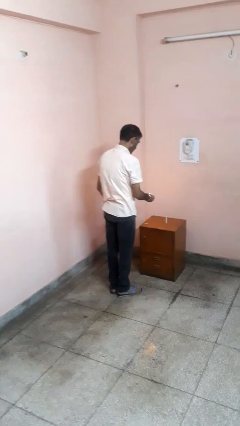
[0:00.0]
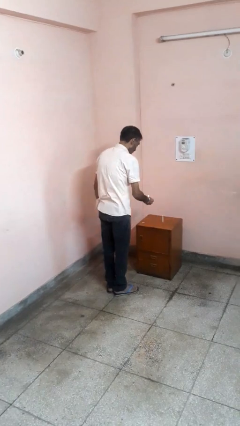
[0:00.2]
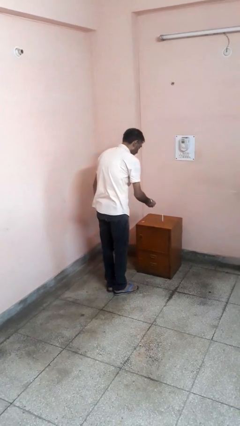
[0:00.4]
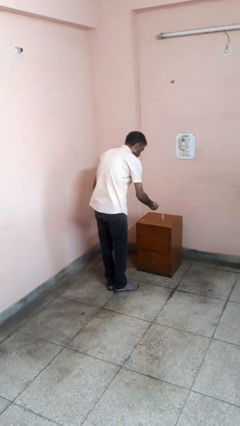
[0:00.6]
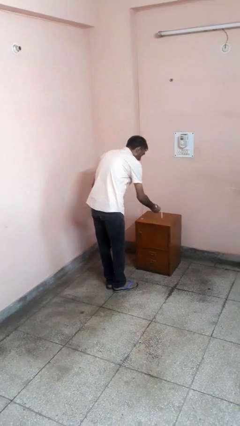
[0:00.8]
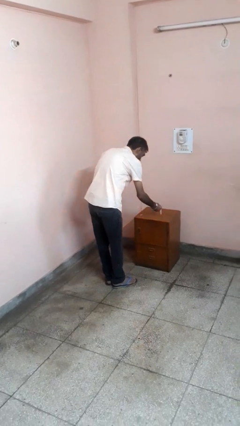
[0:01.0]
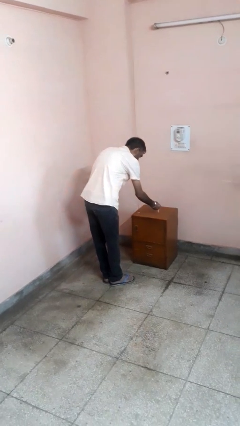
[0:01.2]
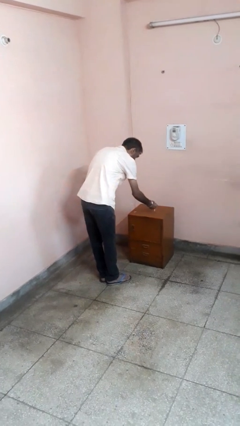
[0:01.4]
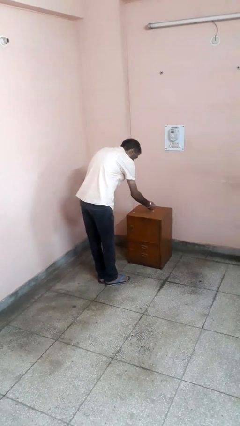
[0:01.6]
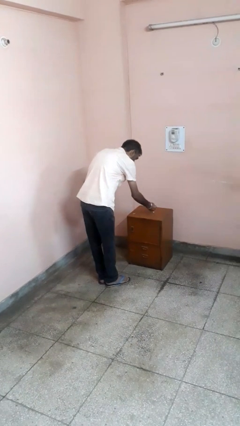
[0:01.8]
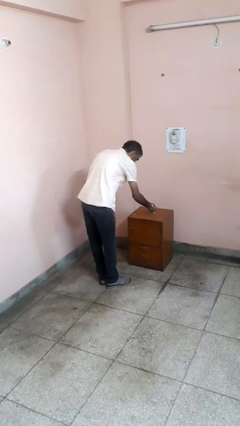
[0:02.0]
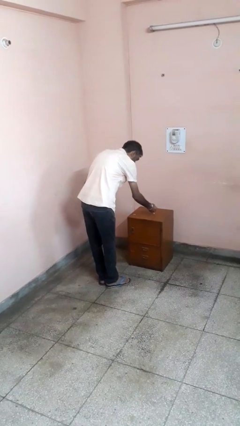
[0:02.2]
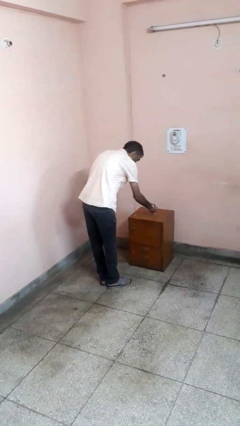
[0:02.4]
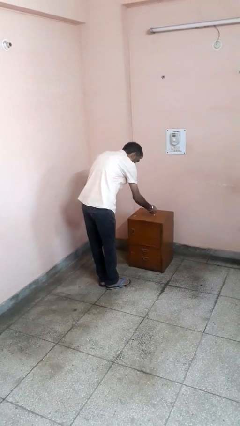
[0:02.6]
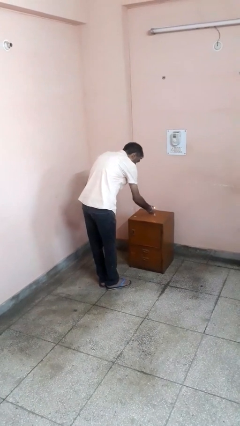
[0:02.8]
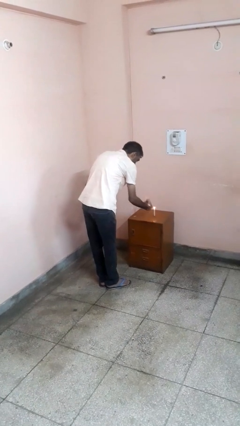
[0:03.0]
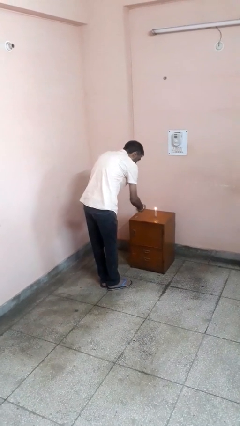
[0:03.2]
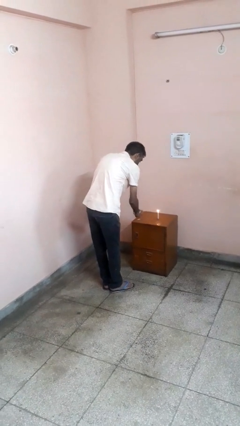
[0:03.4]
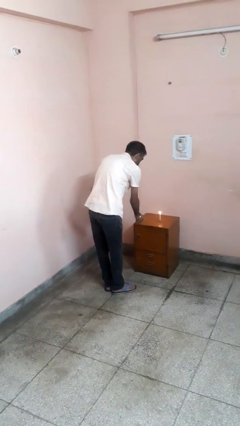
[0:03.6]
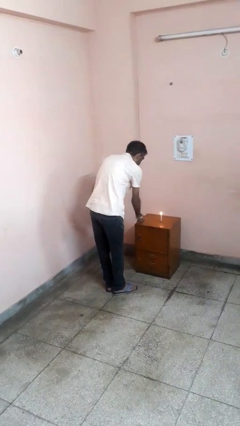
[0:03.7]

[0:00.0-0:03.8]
person lights candle

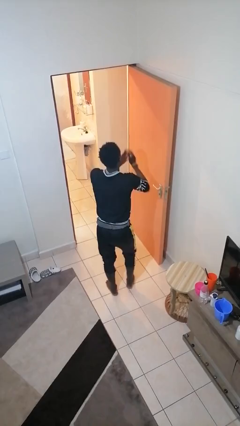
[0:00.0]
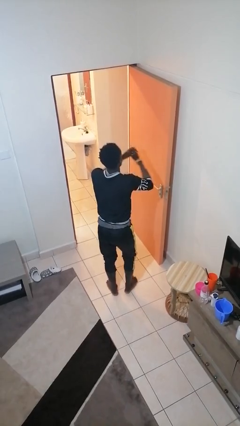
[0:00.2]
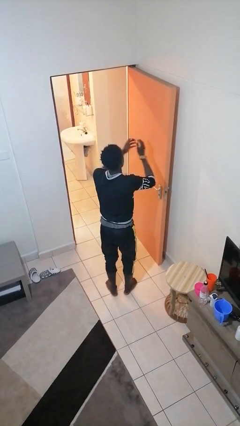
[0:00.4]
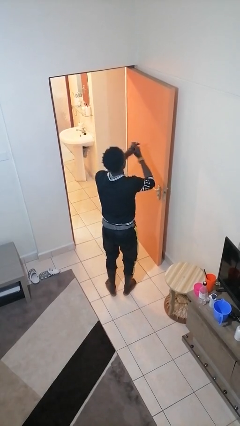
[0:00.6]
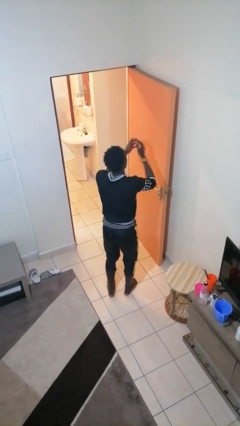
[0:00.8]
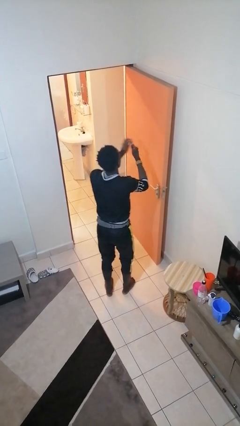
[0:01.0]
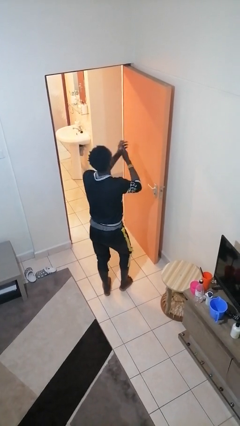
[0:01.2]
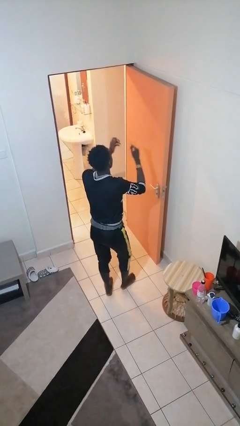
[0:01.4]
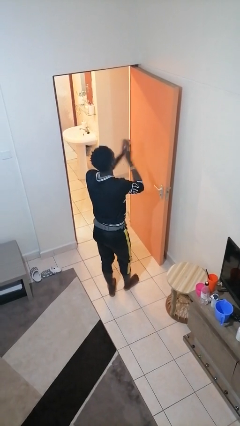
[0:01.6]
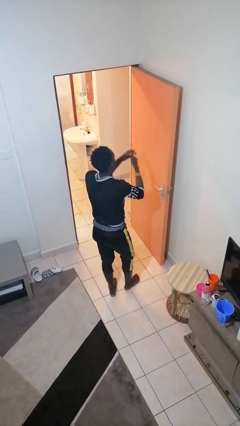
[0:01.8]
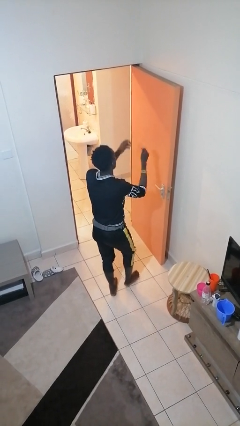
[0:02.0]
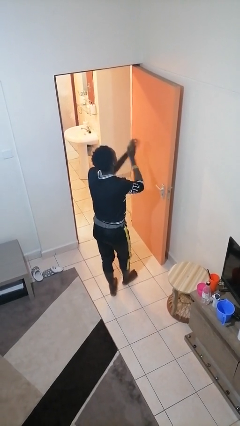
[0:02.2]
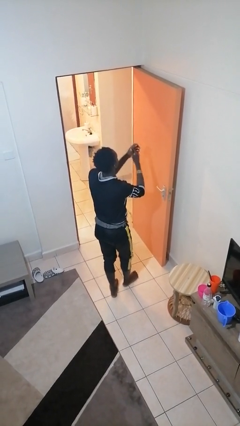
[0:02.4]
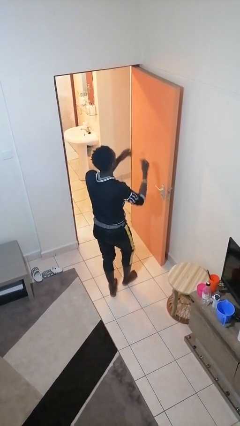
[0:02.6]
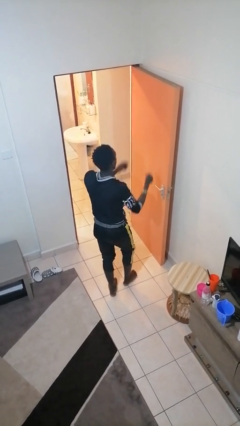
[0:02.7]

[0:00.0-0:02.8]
person claps hands

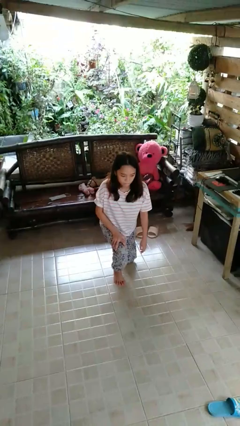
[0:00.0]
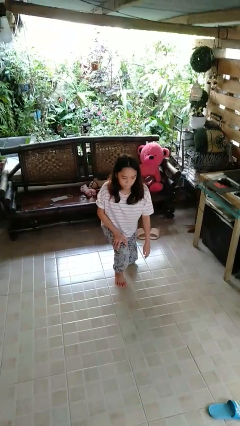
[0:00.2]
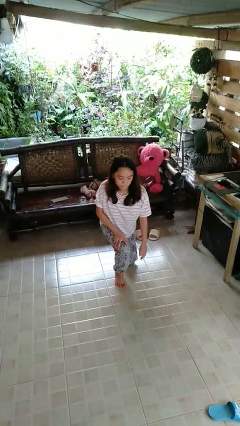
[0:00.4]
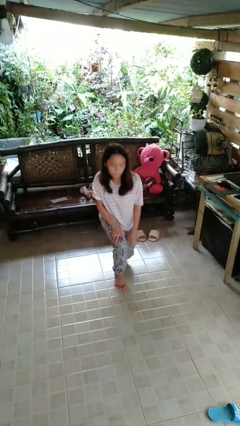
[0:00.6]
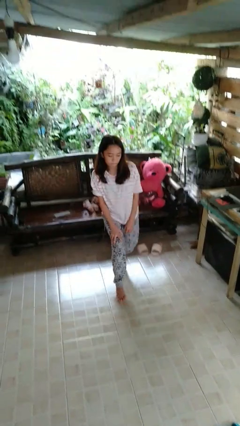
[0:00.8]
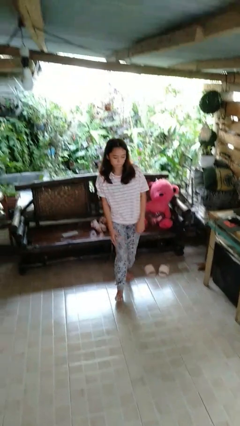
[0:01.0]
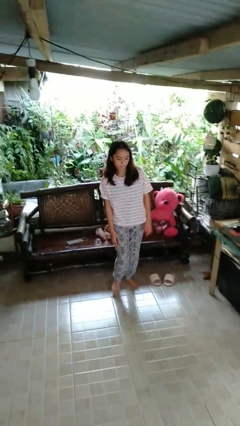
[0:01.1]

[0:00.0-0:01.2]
person stands up from floor

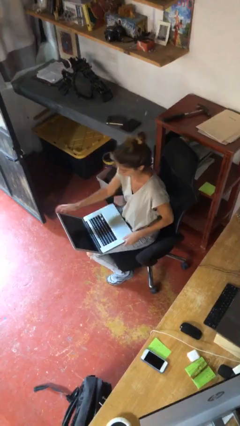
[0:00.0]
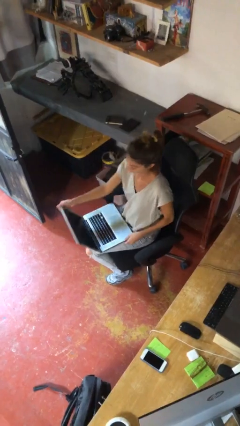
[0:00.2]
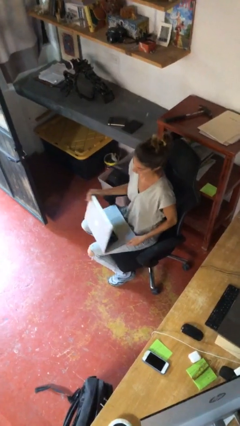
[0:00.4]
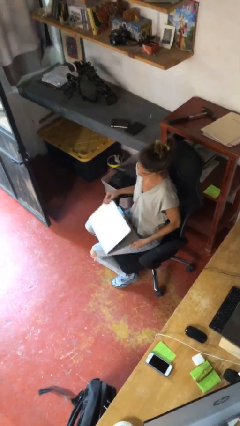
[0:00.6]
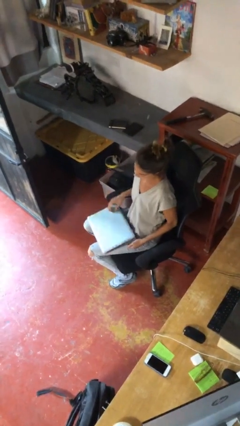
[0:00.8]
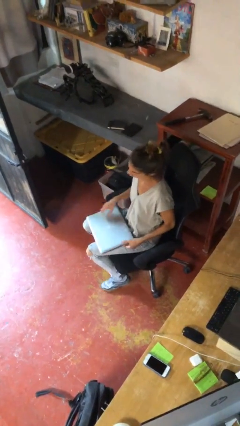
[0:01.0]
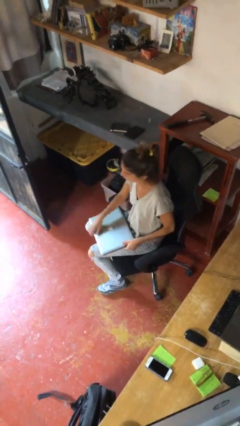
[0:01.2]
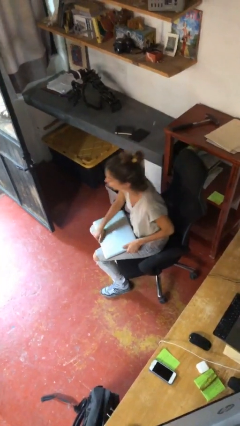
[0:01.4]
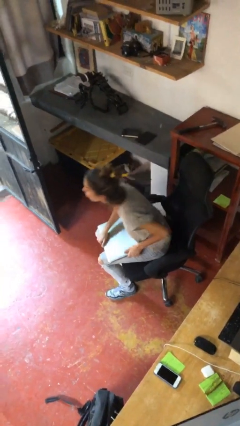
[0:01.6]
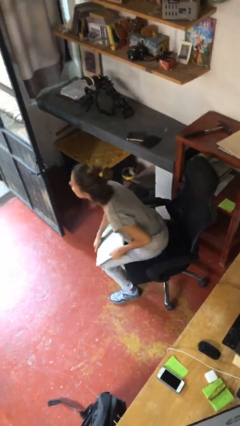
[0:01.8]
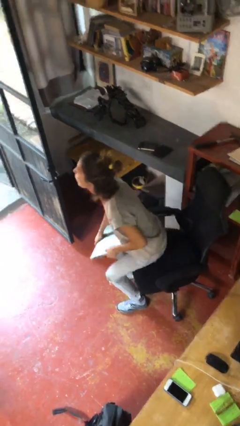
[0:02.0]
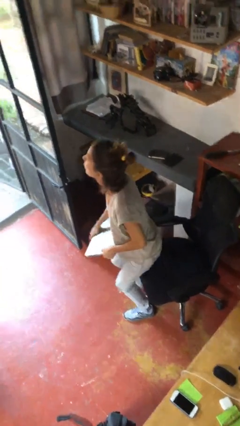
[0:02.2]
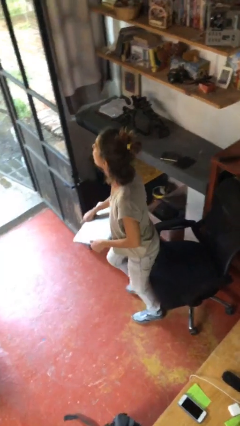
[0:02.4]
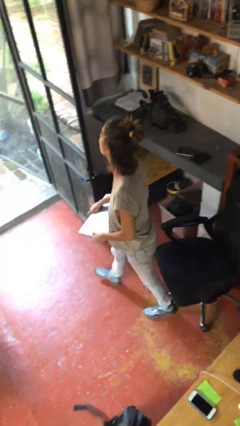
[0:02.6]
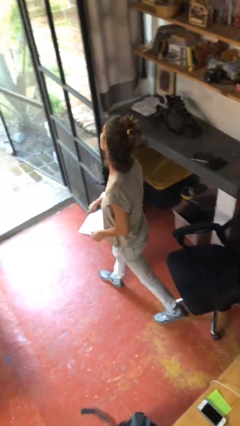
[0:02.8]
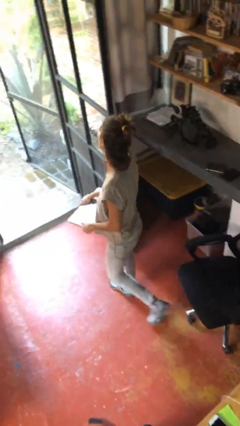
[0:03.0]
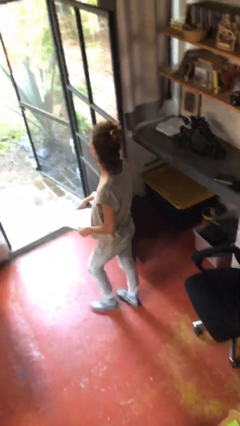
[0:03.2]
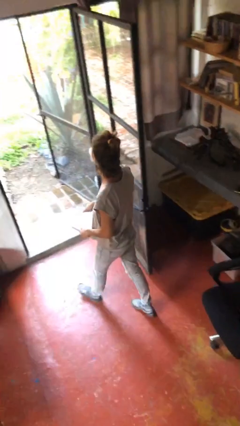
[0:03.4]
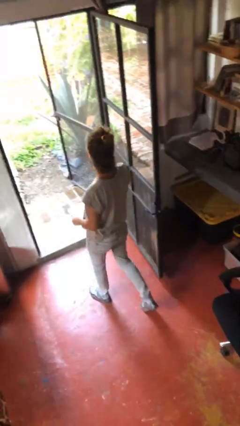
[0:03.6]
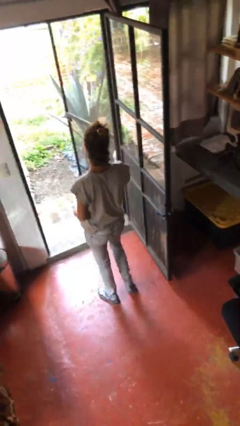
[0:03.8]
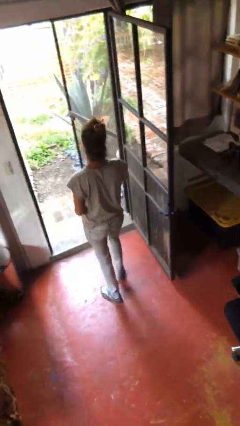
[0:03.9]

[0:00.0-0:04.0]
person stands up

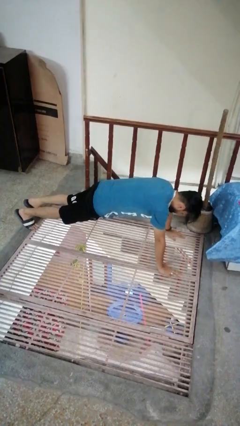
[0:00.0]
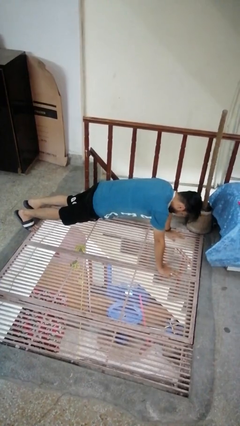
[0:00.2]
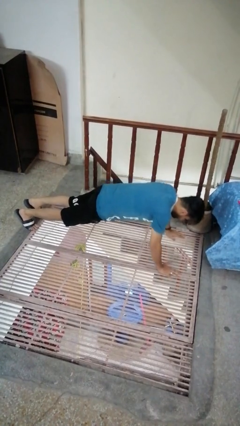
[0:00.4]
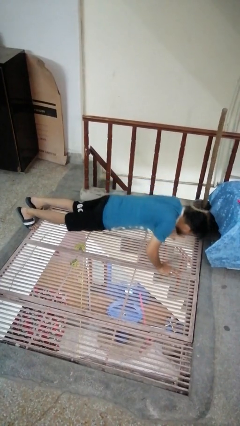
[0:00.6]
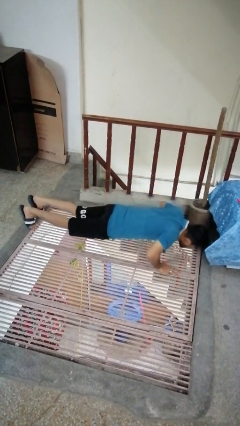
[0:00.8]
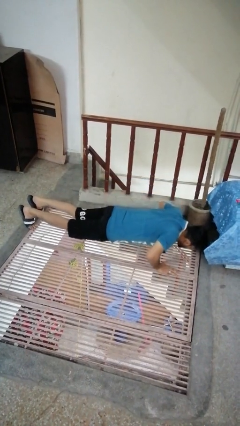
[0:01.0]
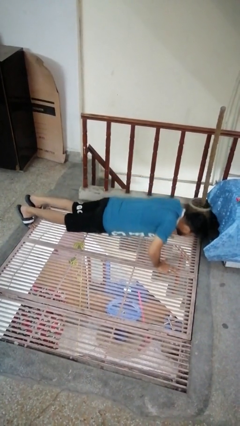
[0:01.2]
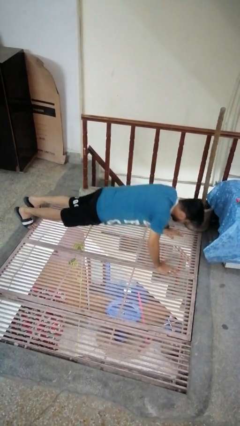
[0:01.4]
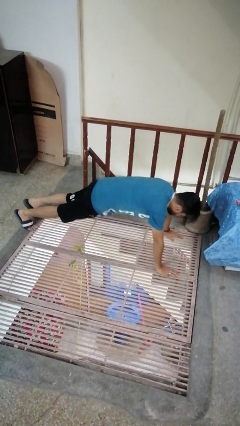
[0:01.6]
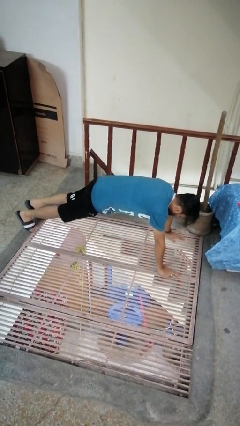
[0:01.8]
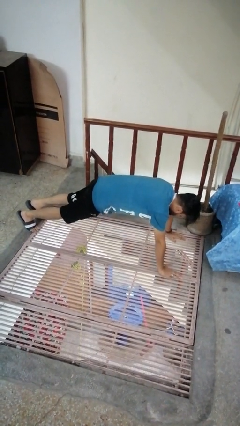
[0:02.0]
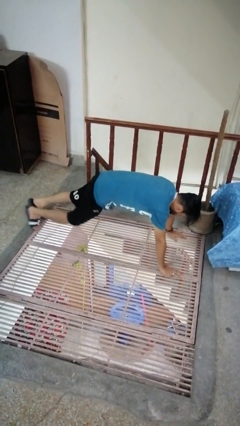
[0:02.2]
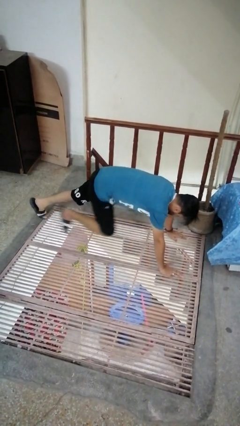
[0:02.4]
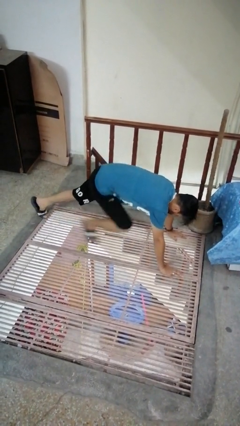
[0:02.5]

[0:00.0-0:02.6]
person exercises with pushup

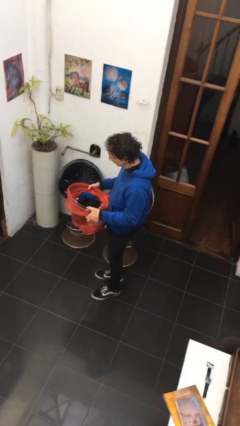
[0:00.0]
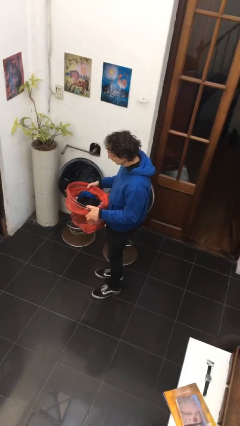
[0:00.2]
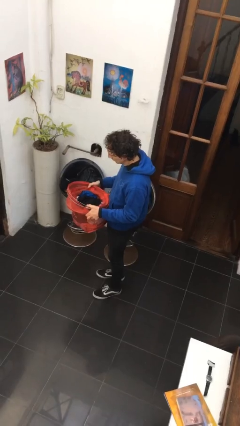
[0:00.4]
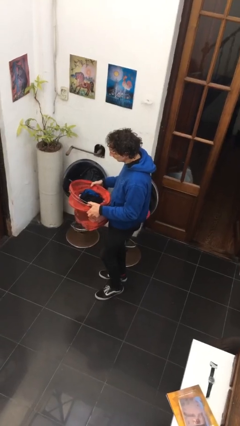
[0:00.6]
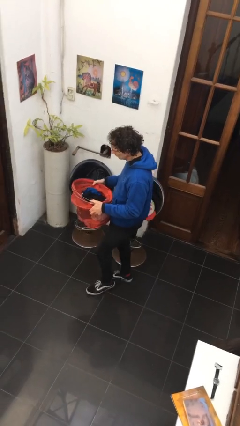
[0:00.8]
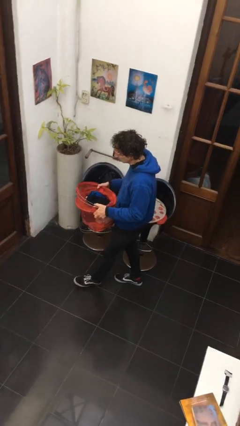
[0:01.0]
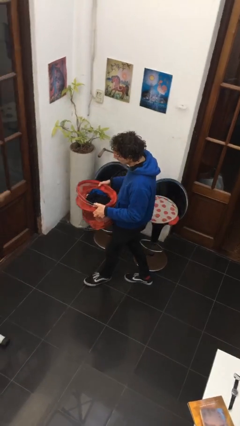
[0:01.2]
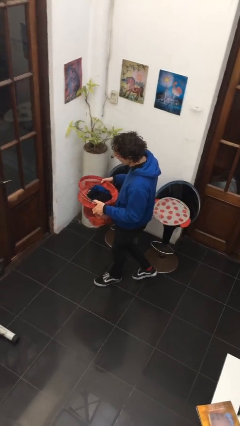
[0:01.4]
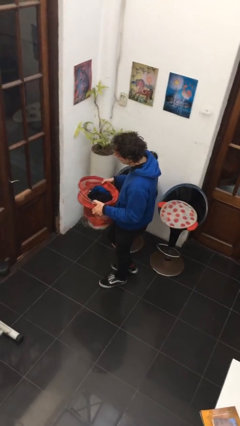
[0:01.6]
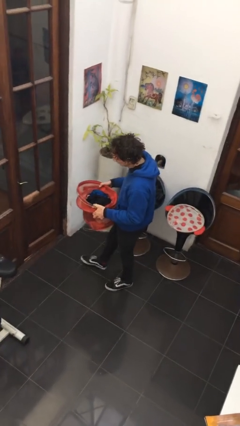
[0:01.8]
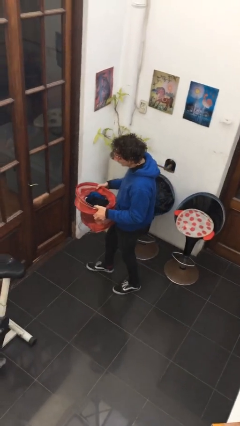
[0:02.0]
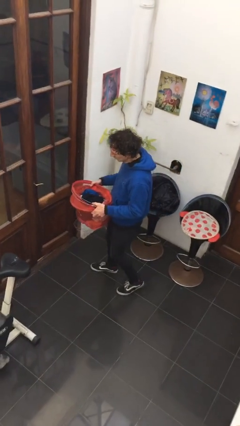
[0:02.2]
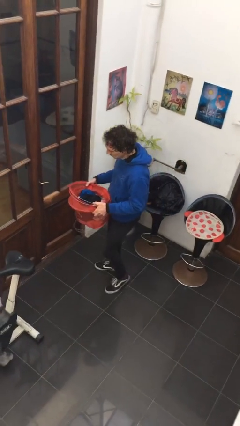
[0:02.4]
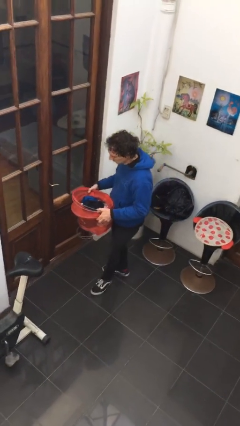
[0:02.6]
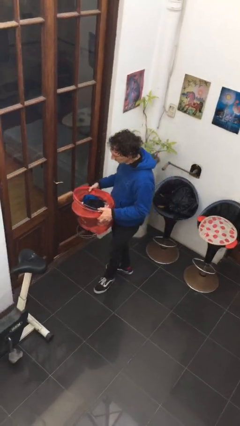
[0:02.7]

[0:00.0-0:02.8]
person carries laundry basket

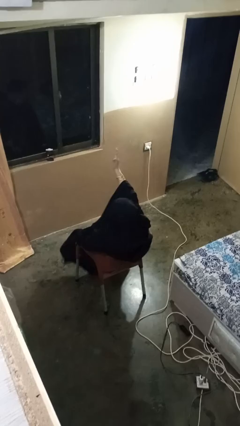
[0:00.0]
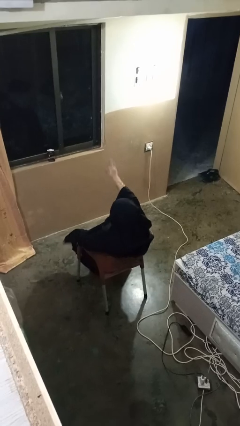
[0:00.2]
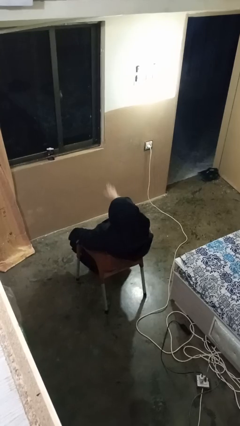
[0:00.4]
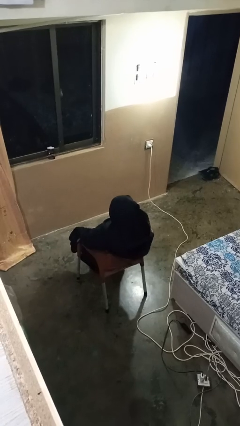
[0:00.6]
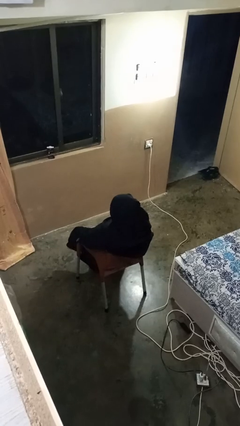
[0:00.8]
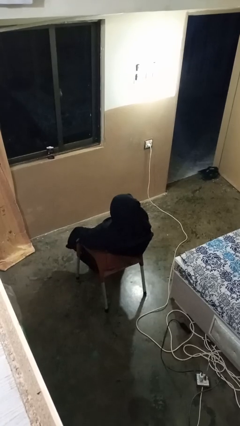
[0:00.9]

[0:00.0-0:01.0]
person gestures swipe down
